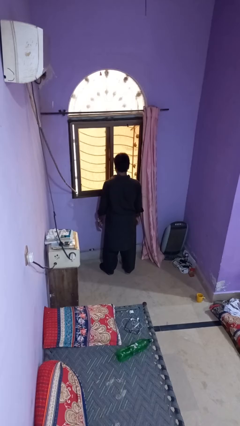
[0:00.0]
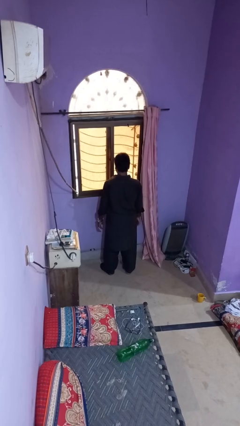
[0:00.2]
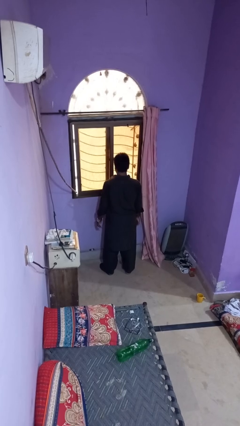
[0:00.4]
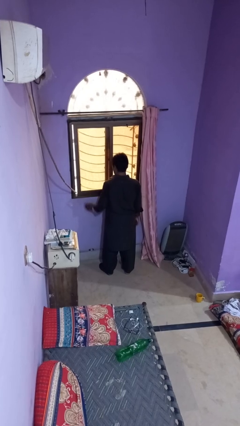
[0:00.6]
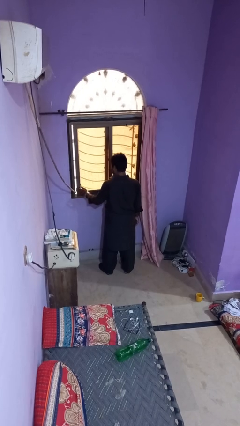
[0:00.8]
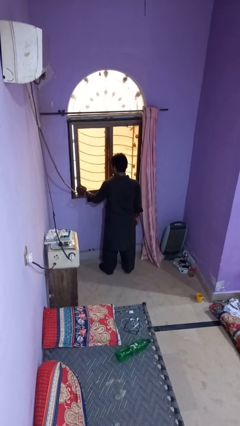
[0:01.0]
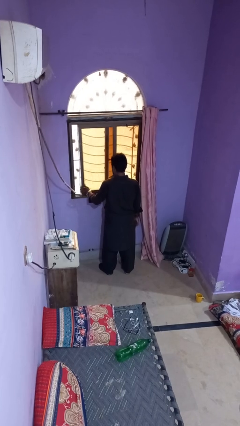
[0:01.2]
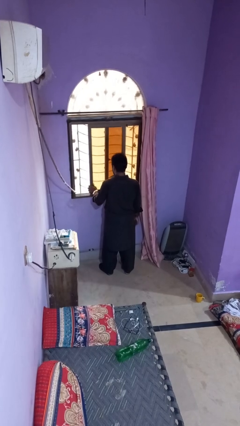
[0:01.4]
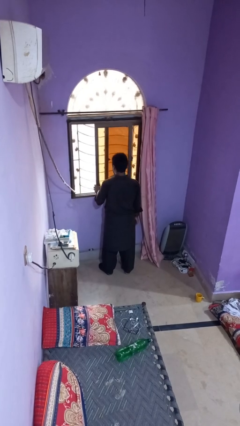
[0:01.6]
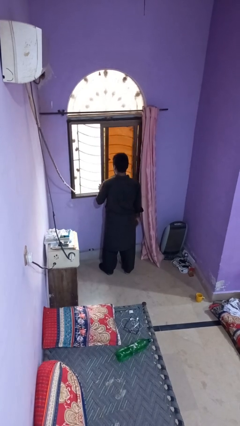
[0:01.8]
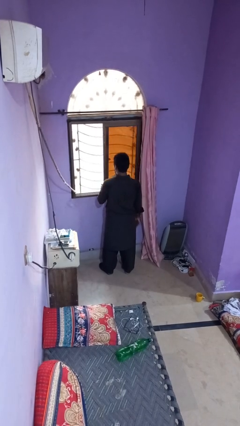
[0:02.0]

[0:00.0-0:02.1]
person opens home window

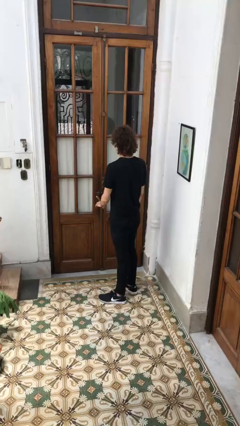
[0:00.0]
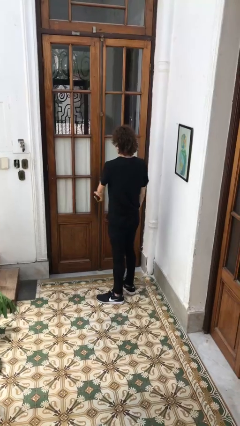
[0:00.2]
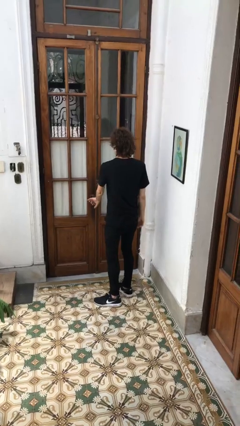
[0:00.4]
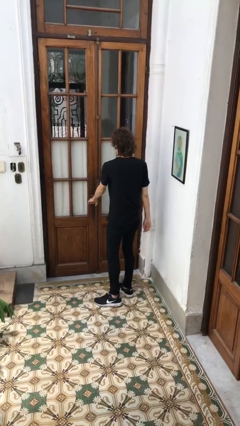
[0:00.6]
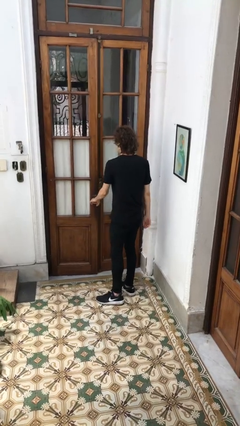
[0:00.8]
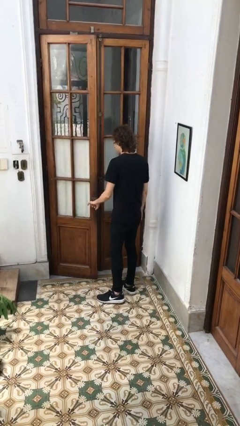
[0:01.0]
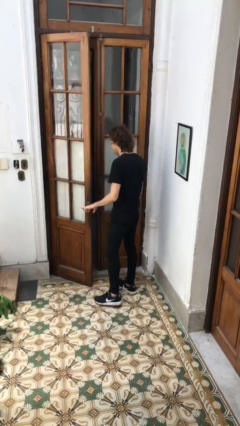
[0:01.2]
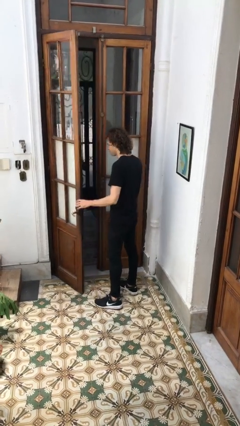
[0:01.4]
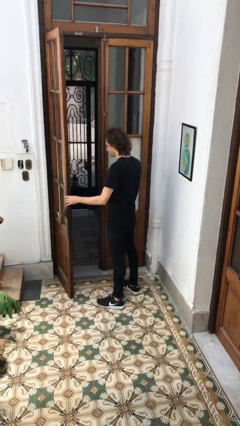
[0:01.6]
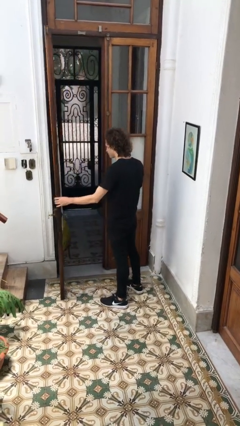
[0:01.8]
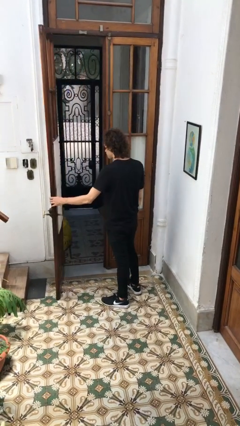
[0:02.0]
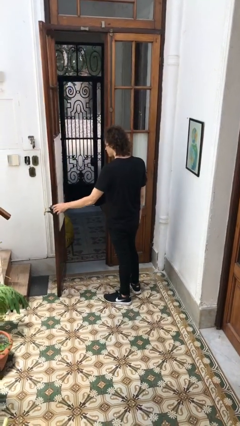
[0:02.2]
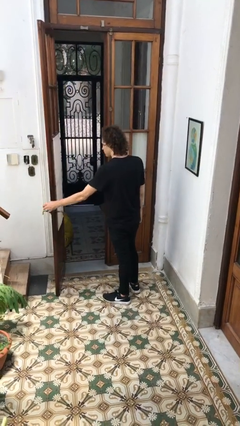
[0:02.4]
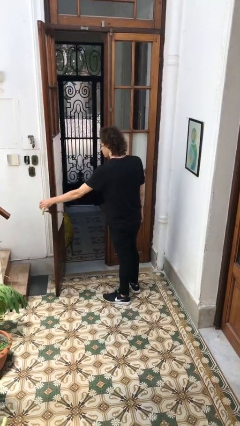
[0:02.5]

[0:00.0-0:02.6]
person opens facility door

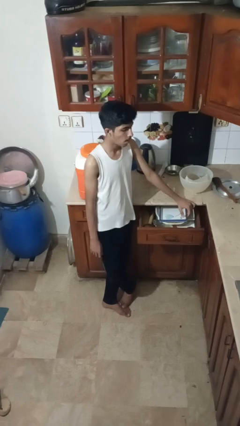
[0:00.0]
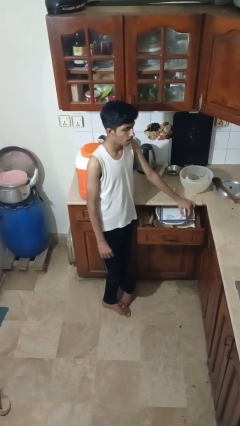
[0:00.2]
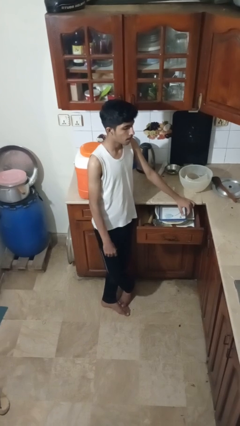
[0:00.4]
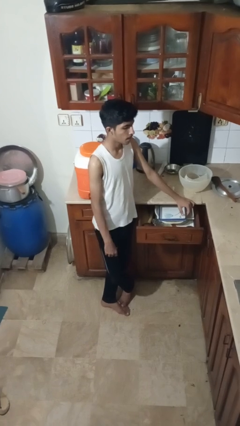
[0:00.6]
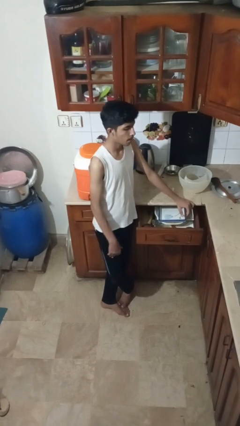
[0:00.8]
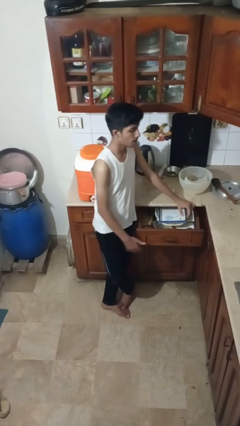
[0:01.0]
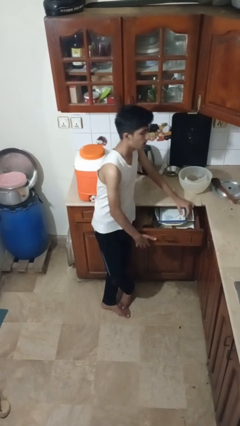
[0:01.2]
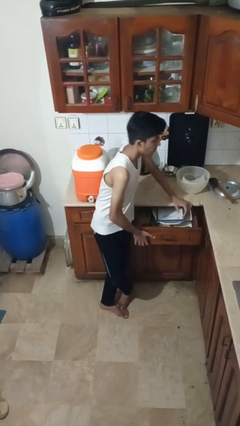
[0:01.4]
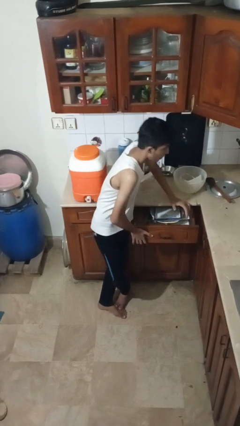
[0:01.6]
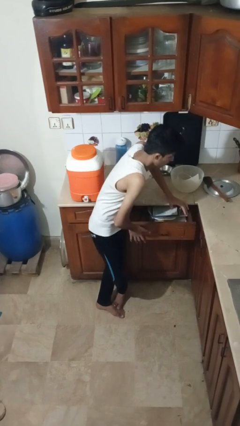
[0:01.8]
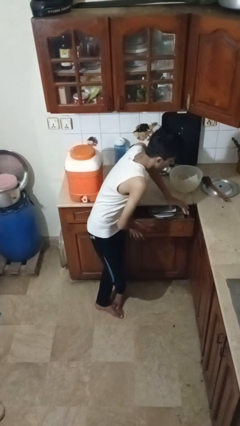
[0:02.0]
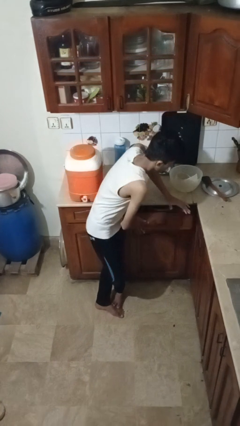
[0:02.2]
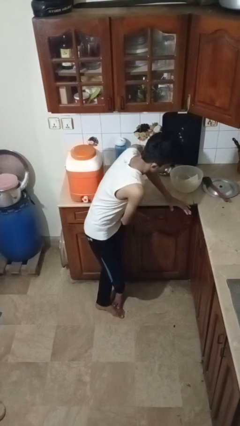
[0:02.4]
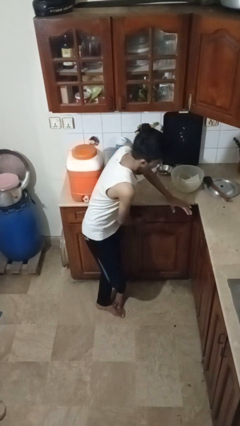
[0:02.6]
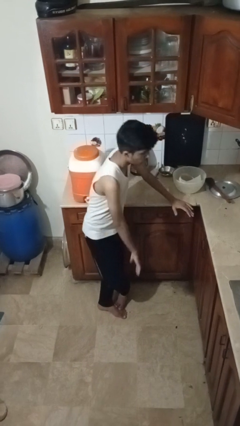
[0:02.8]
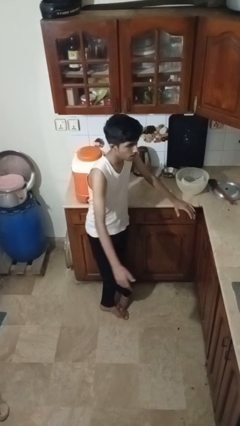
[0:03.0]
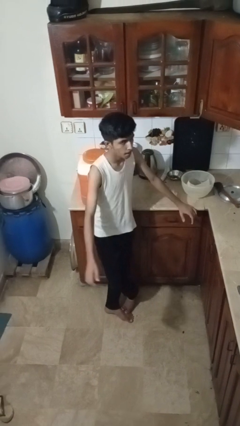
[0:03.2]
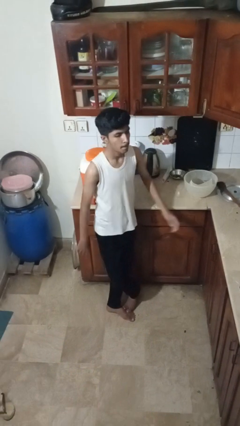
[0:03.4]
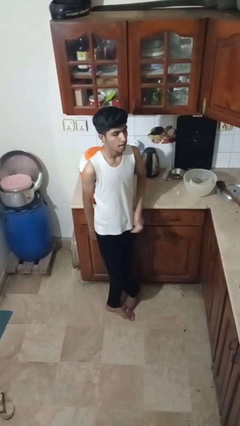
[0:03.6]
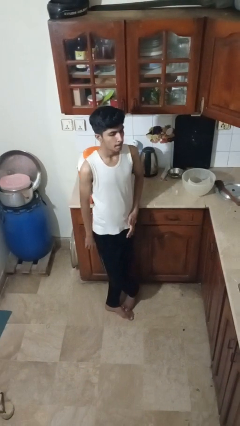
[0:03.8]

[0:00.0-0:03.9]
person closes kitchen drawer

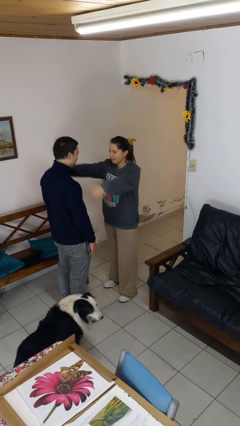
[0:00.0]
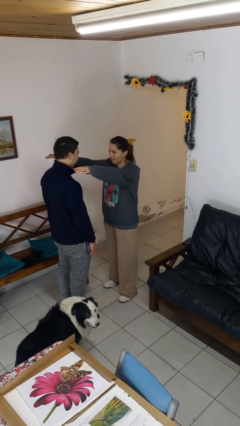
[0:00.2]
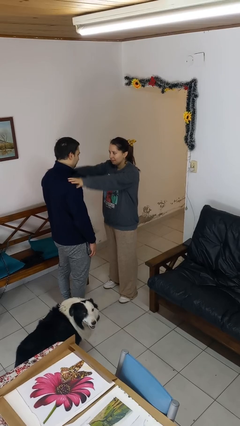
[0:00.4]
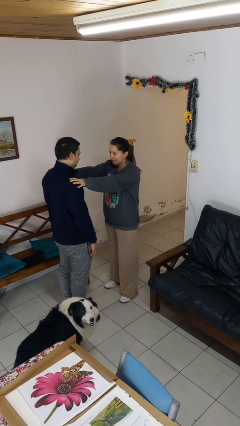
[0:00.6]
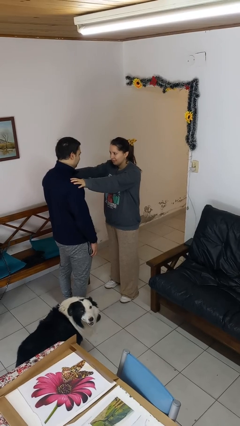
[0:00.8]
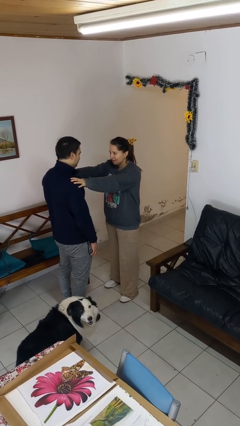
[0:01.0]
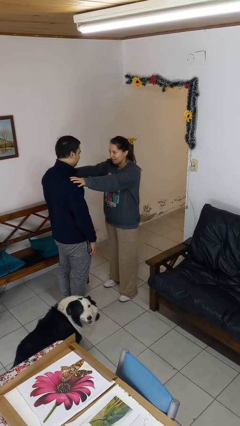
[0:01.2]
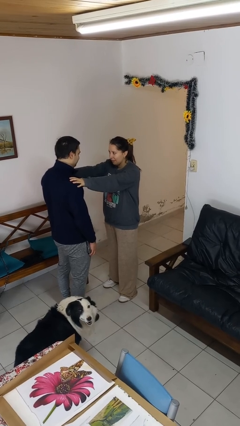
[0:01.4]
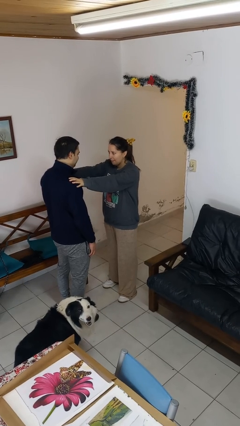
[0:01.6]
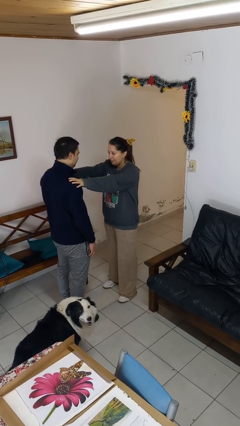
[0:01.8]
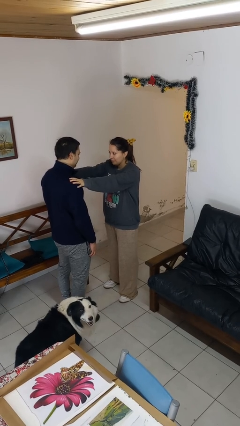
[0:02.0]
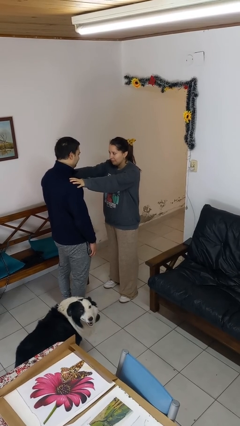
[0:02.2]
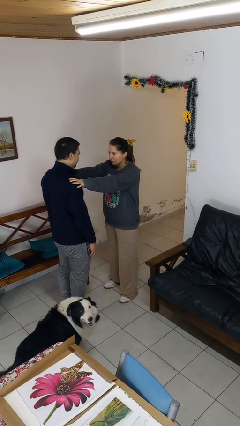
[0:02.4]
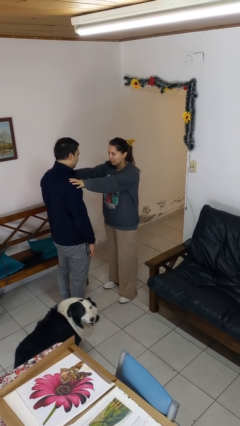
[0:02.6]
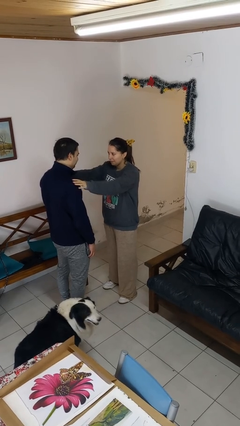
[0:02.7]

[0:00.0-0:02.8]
person pounds shoulders of person

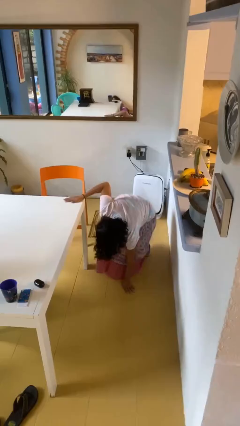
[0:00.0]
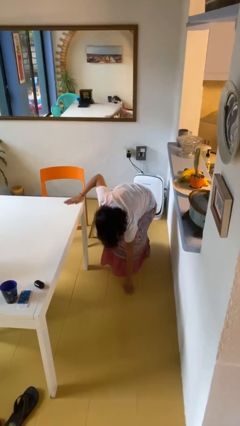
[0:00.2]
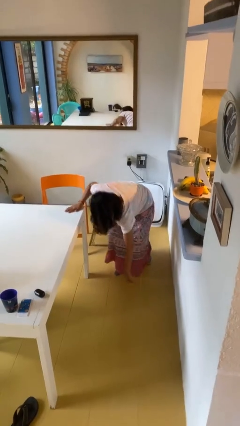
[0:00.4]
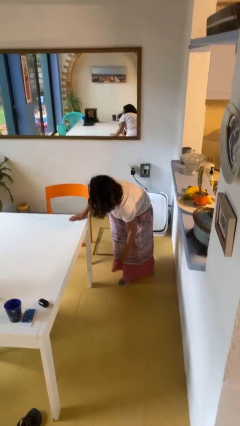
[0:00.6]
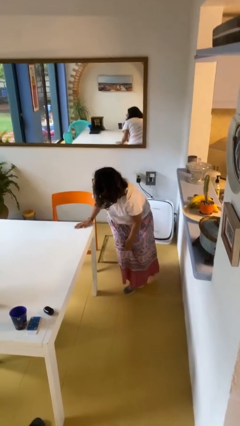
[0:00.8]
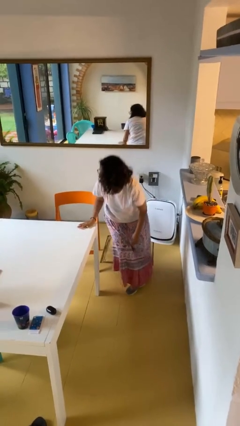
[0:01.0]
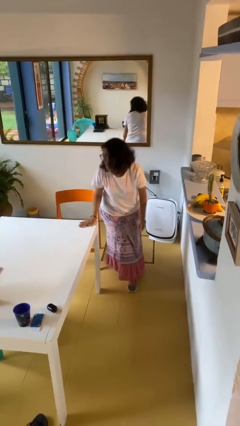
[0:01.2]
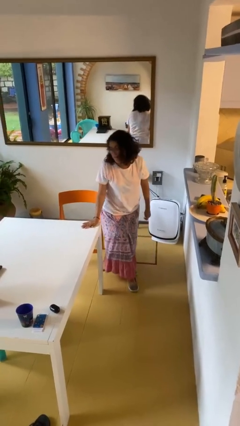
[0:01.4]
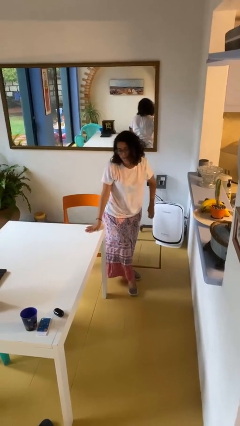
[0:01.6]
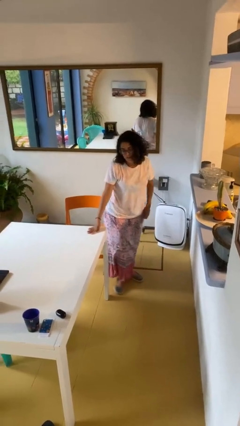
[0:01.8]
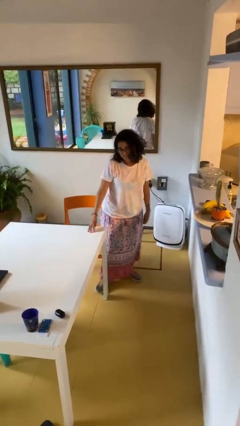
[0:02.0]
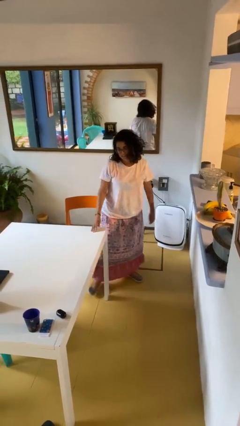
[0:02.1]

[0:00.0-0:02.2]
person stands up from floor

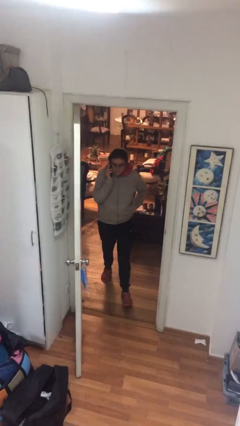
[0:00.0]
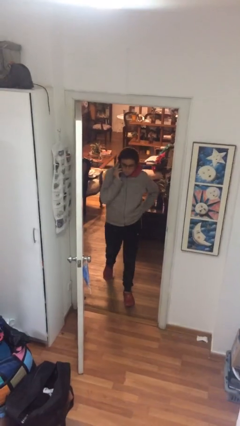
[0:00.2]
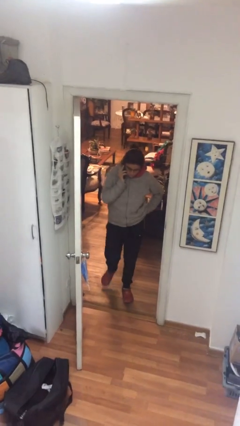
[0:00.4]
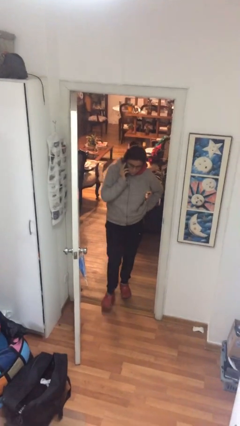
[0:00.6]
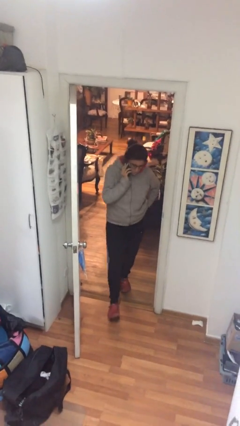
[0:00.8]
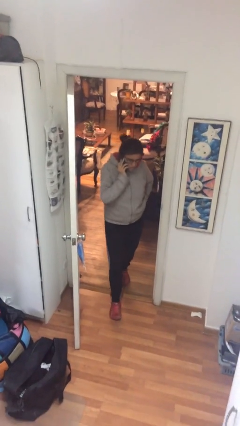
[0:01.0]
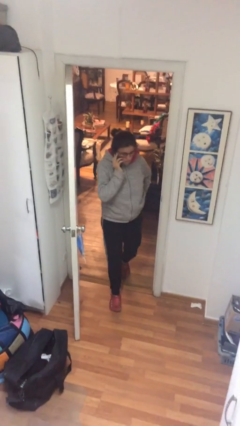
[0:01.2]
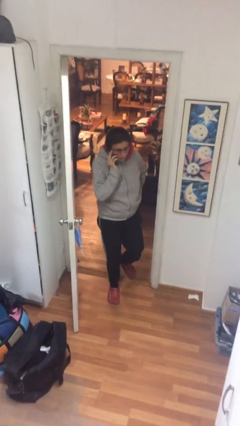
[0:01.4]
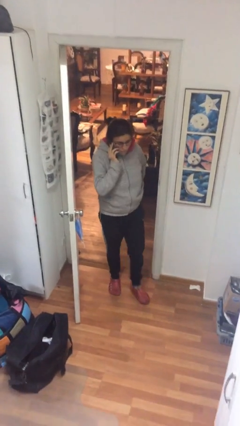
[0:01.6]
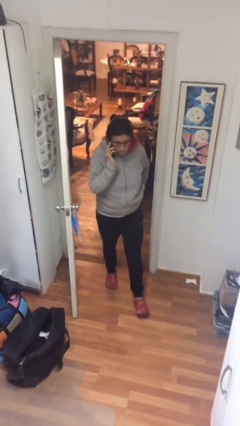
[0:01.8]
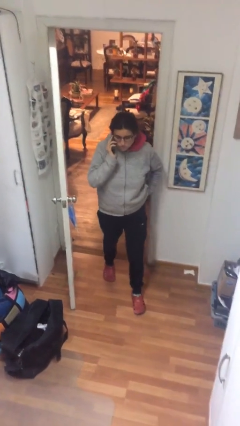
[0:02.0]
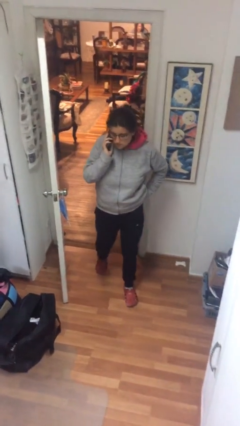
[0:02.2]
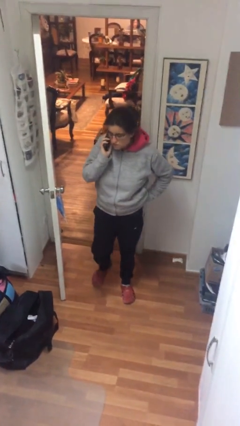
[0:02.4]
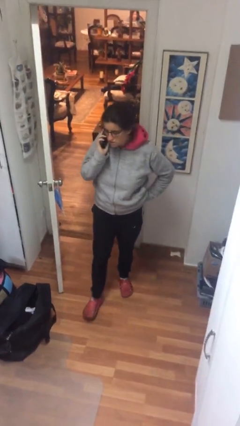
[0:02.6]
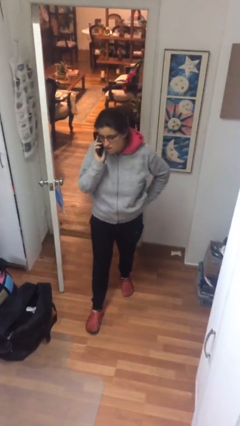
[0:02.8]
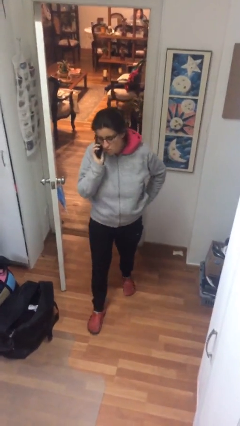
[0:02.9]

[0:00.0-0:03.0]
person enters scene through structure

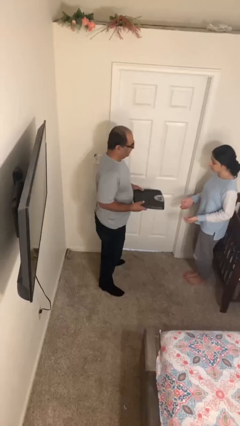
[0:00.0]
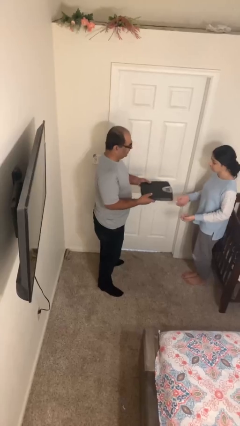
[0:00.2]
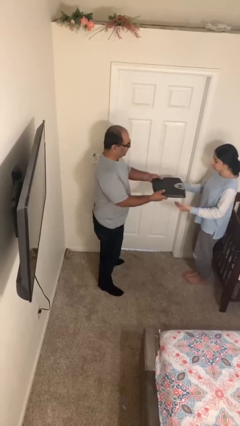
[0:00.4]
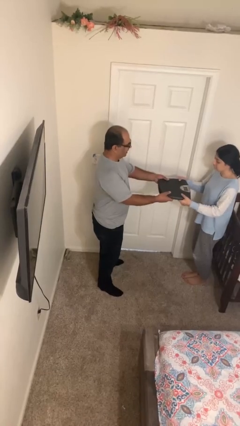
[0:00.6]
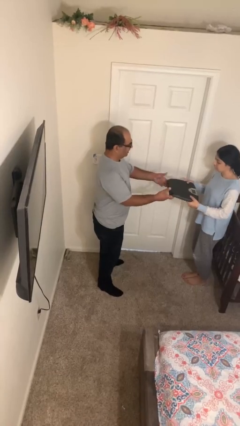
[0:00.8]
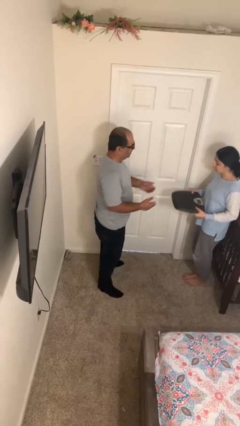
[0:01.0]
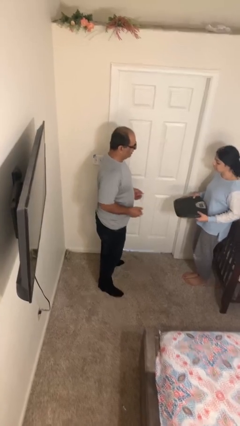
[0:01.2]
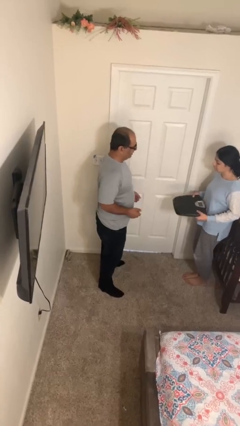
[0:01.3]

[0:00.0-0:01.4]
person transfers object to person
